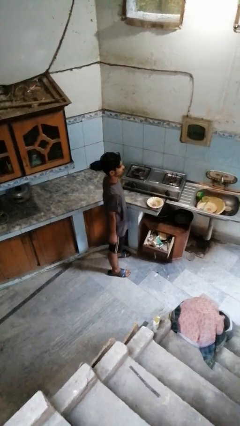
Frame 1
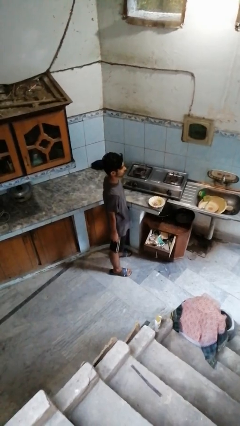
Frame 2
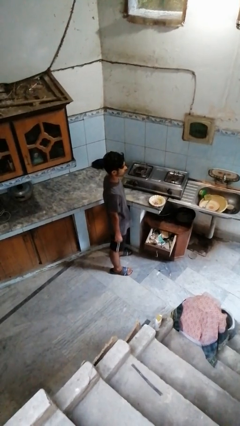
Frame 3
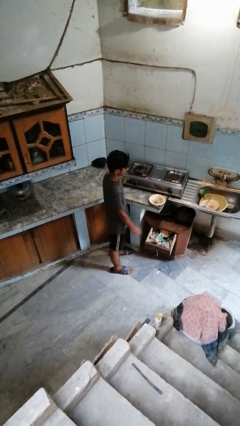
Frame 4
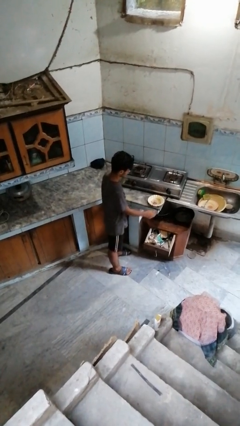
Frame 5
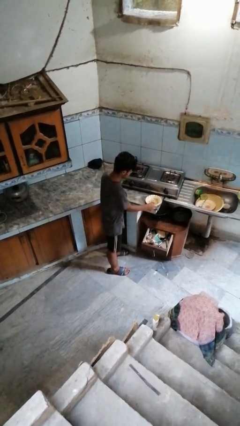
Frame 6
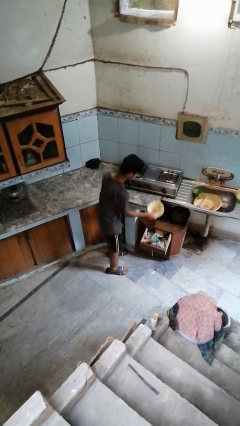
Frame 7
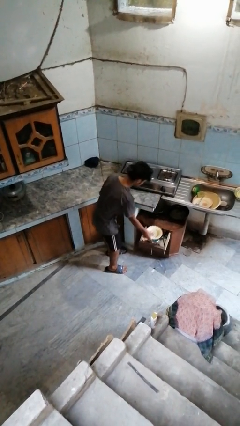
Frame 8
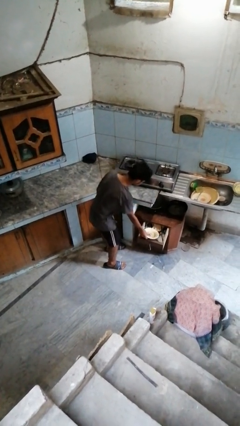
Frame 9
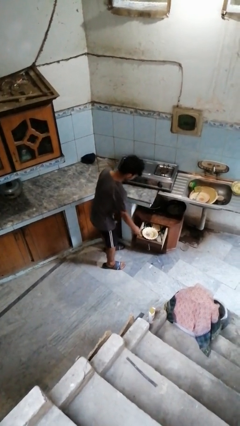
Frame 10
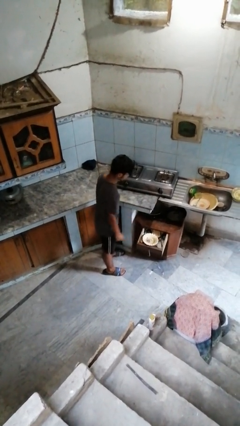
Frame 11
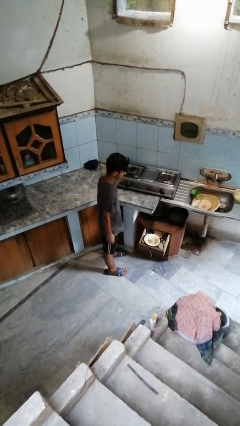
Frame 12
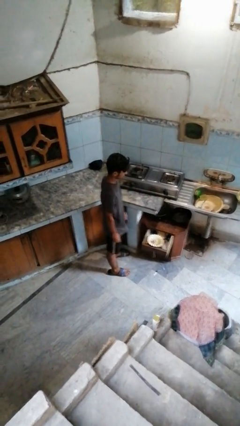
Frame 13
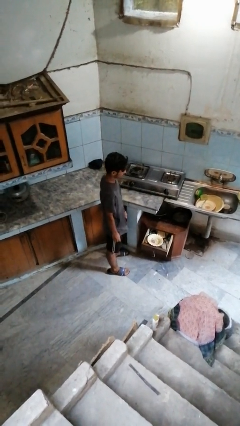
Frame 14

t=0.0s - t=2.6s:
person puts object into kitchen drawer

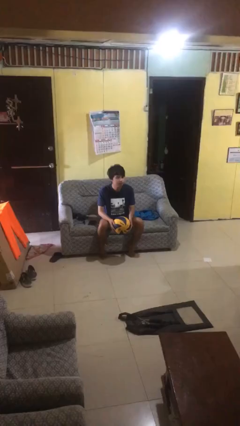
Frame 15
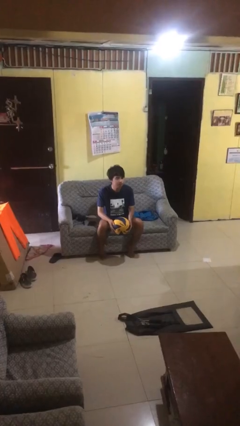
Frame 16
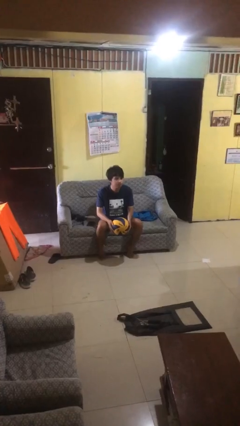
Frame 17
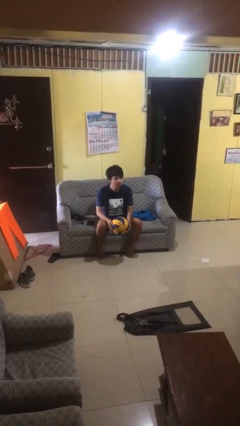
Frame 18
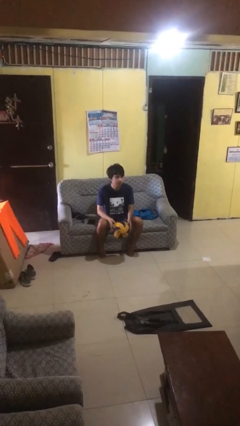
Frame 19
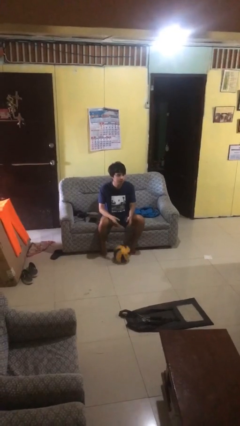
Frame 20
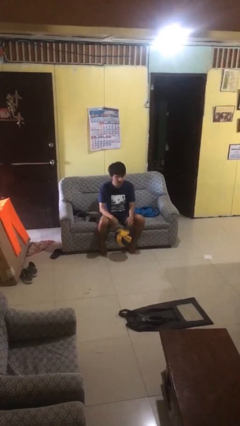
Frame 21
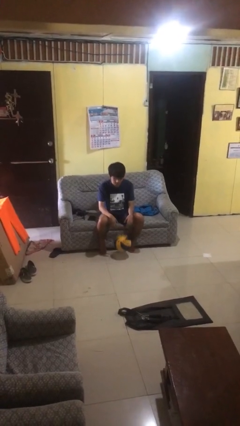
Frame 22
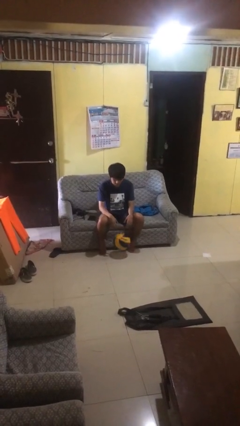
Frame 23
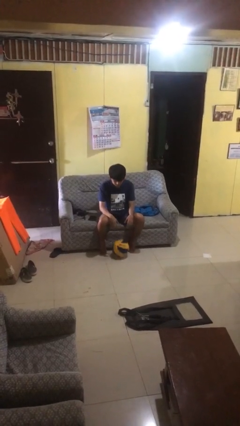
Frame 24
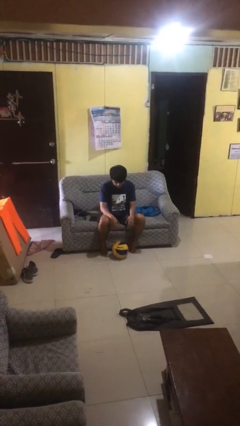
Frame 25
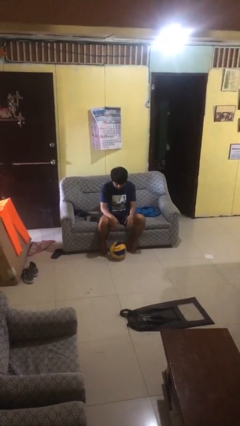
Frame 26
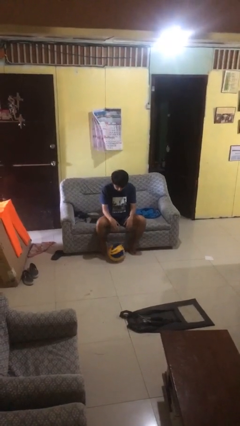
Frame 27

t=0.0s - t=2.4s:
person drops object

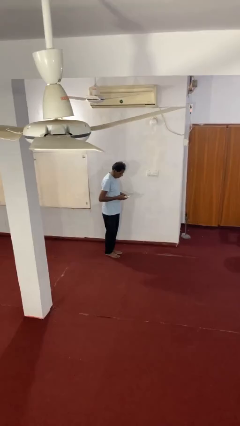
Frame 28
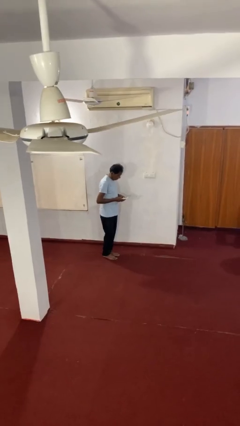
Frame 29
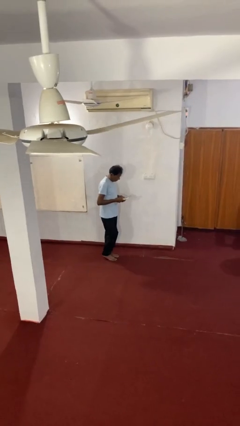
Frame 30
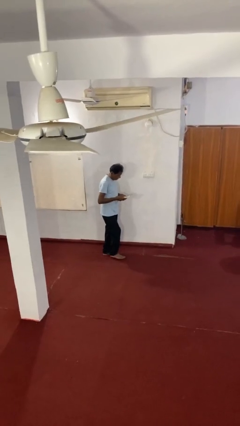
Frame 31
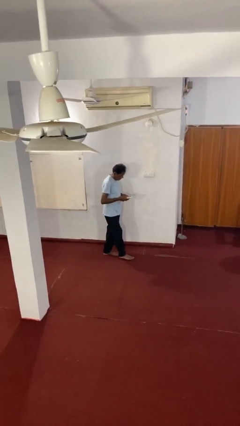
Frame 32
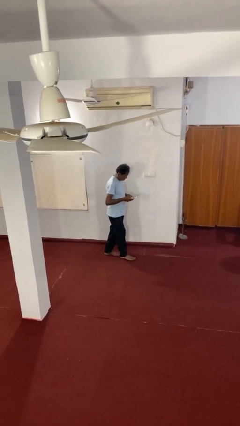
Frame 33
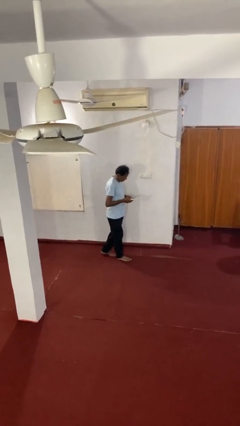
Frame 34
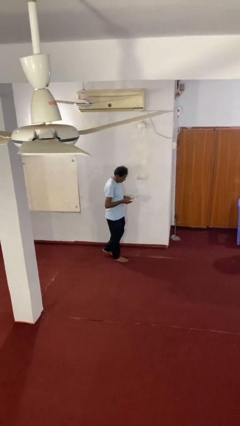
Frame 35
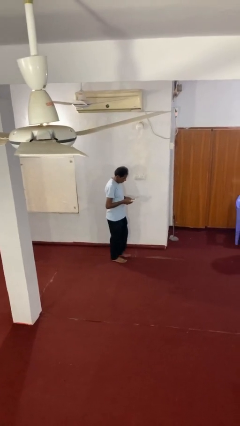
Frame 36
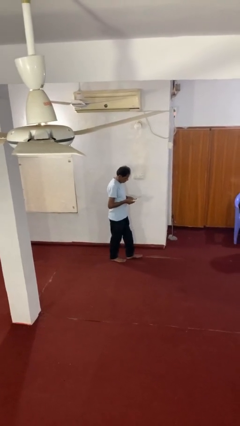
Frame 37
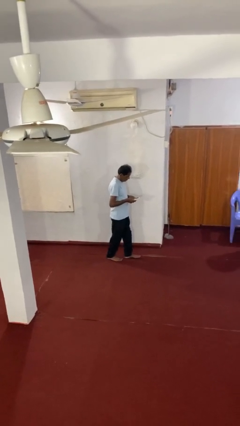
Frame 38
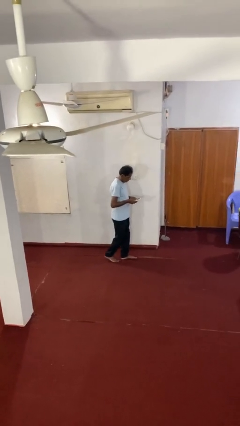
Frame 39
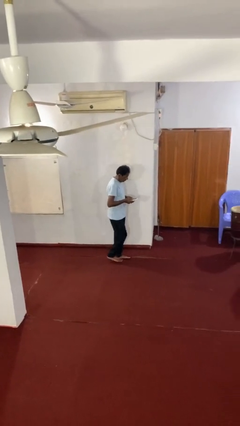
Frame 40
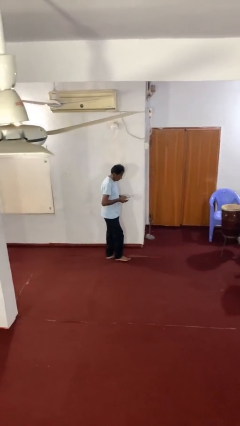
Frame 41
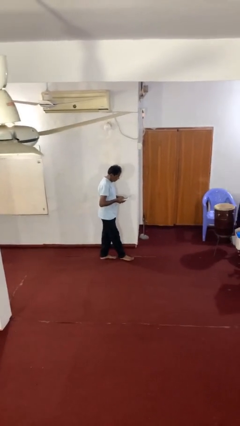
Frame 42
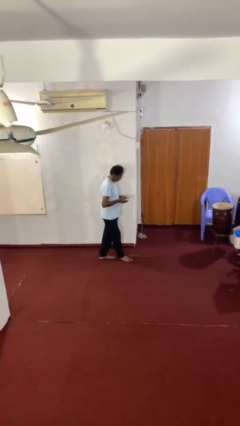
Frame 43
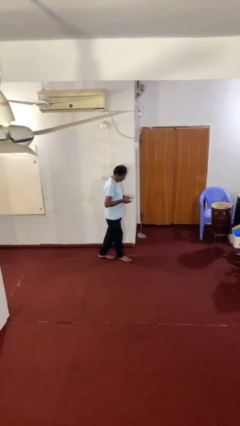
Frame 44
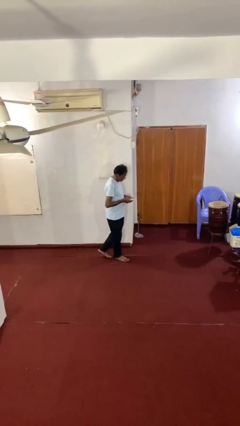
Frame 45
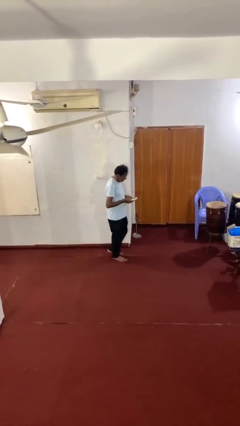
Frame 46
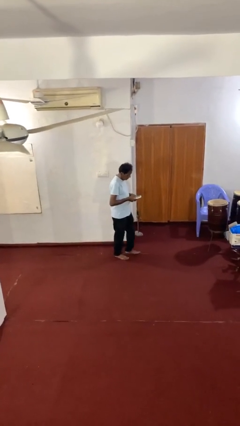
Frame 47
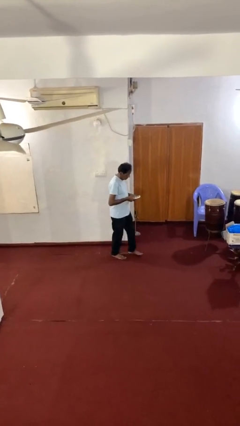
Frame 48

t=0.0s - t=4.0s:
person texts on phone

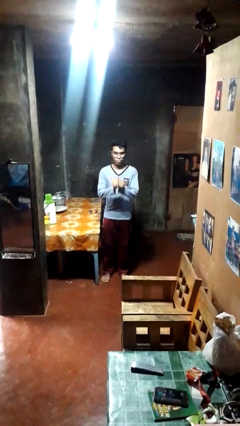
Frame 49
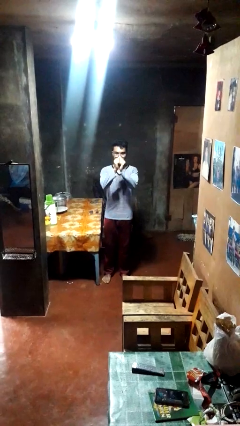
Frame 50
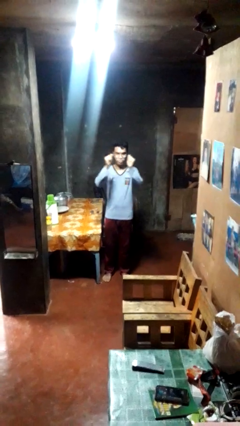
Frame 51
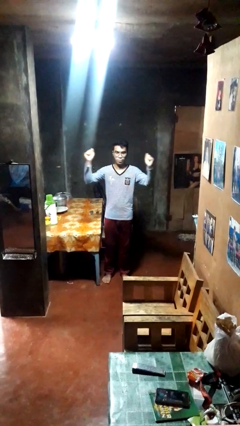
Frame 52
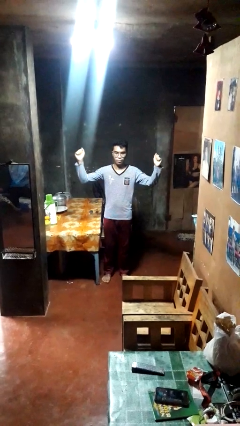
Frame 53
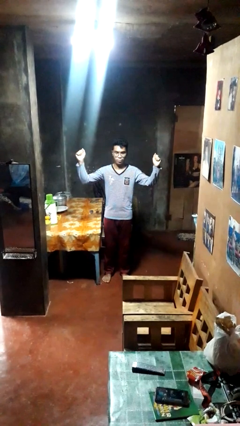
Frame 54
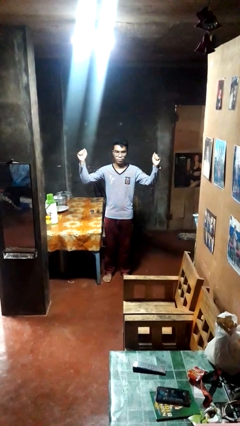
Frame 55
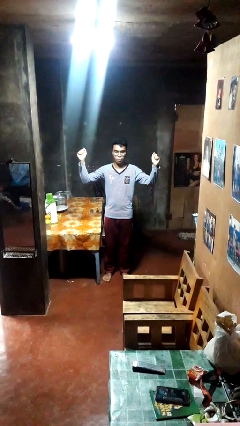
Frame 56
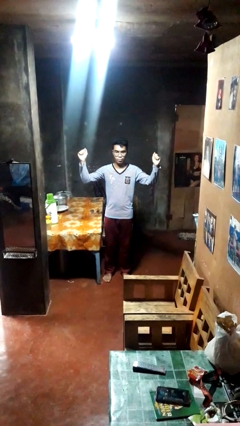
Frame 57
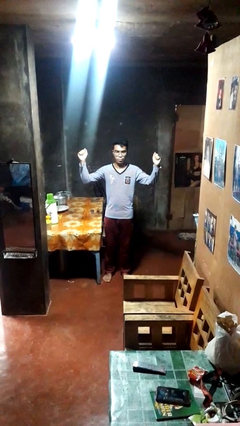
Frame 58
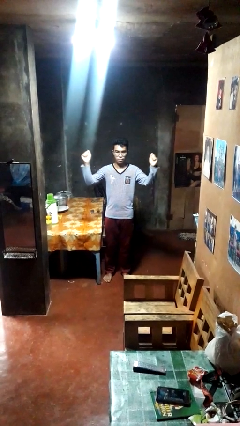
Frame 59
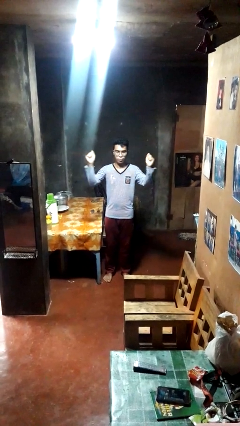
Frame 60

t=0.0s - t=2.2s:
person gestures zoom in

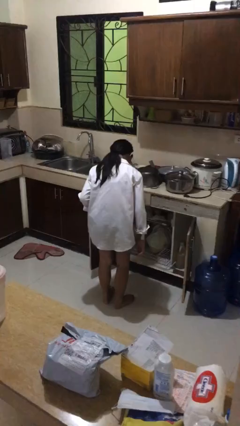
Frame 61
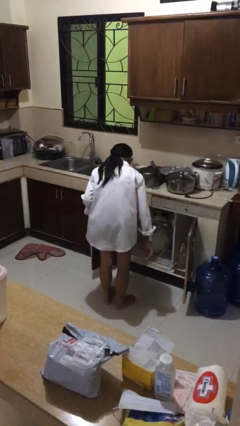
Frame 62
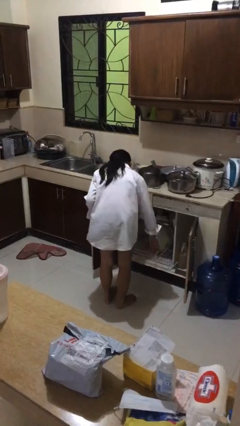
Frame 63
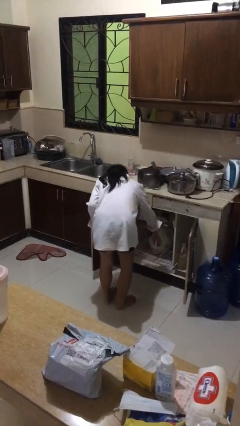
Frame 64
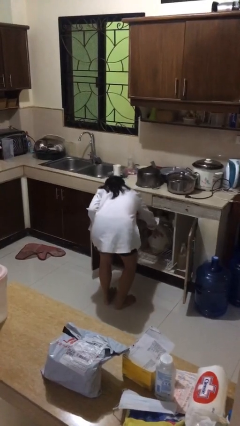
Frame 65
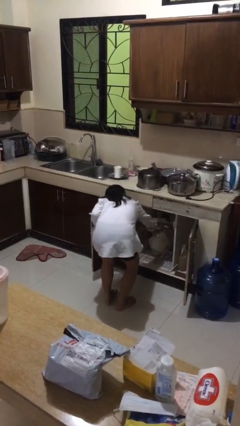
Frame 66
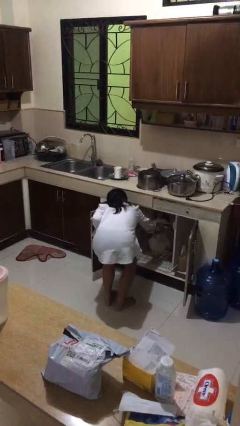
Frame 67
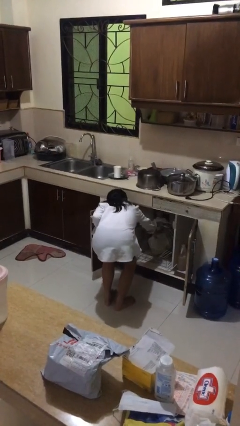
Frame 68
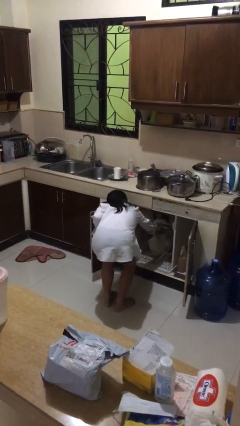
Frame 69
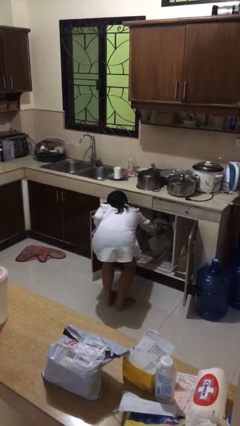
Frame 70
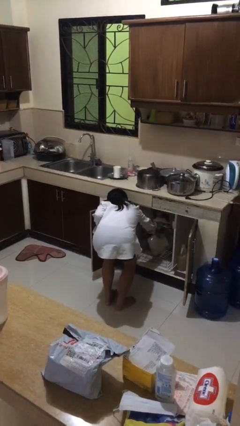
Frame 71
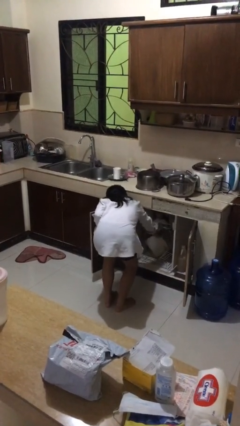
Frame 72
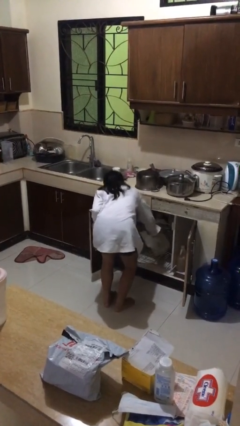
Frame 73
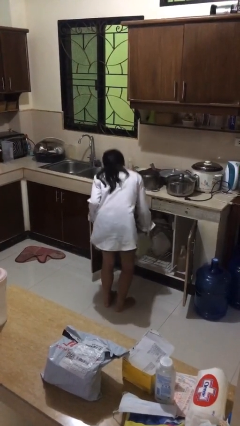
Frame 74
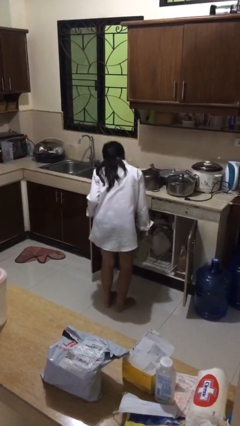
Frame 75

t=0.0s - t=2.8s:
person unloads dishwasher

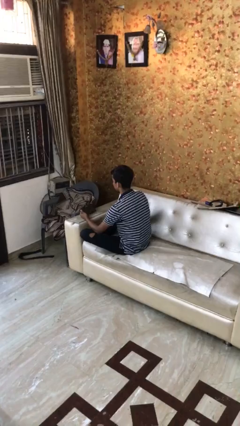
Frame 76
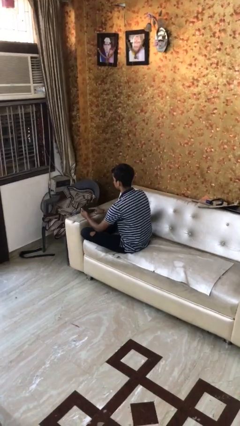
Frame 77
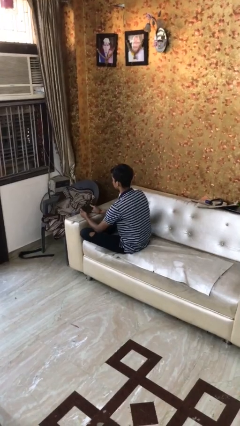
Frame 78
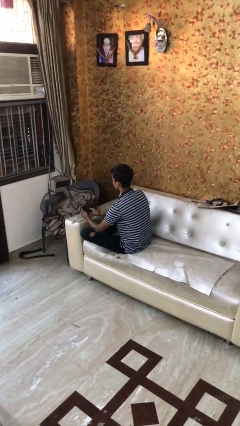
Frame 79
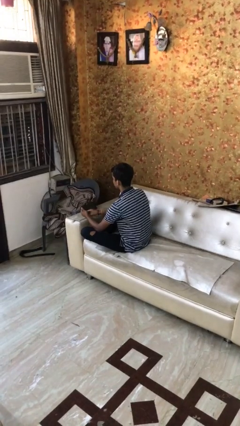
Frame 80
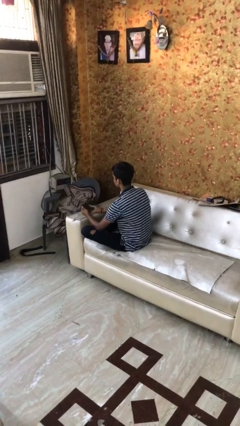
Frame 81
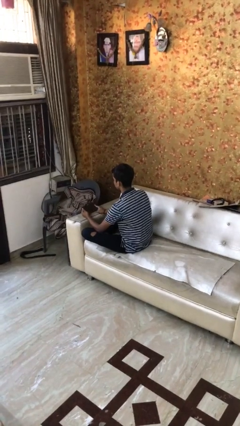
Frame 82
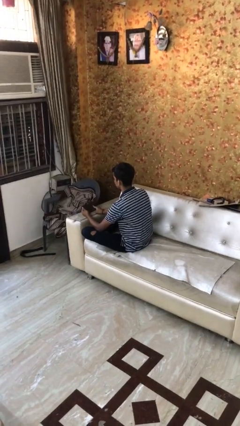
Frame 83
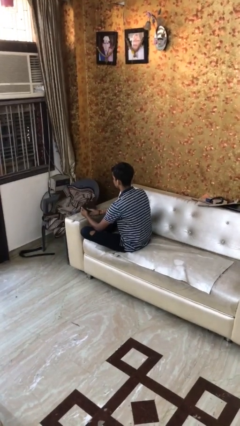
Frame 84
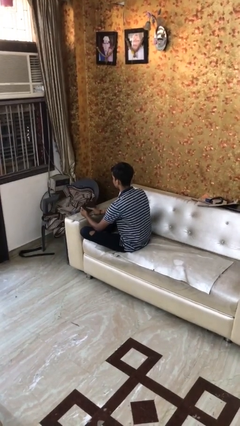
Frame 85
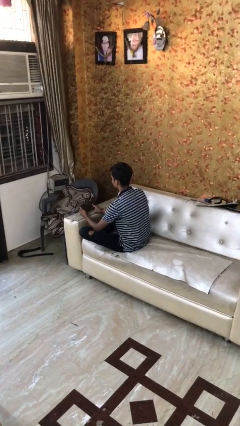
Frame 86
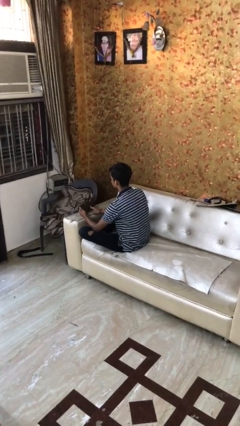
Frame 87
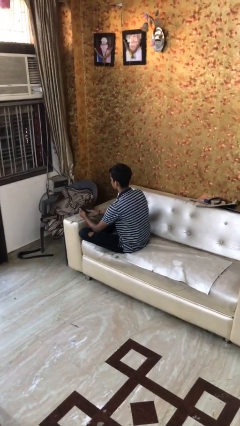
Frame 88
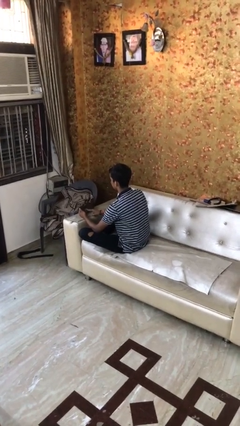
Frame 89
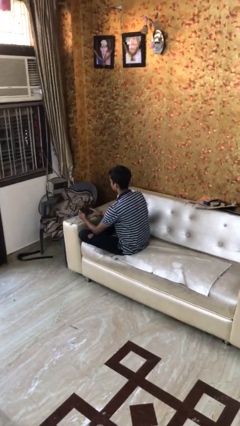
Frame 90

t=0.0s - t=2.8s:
person interacts with tablet
